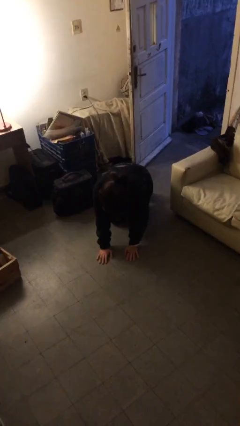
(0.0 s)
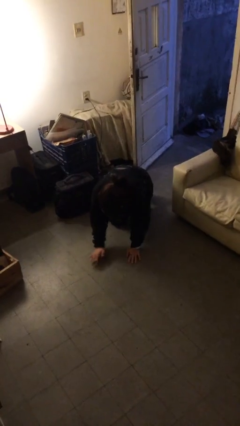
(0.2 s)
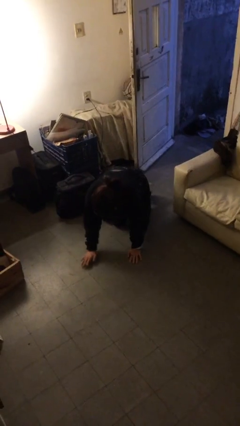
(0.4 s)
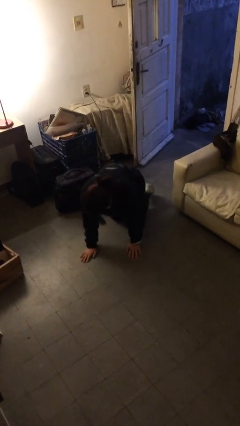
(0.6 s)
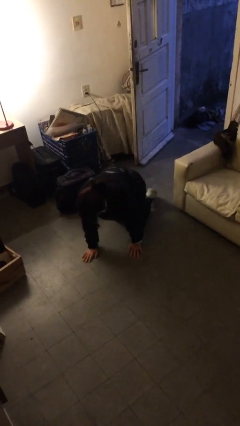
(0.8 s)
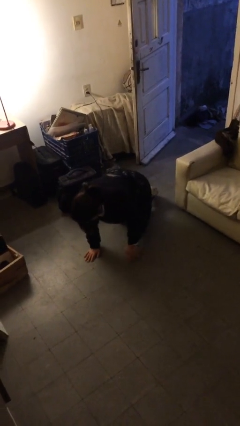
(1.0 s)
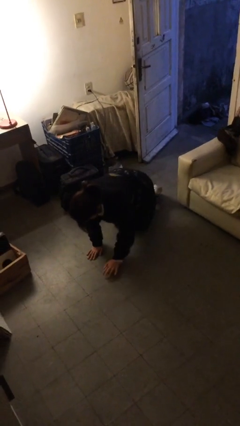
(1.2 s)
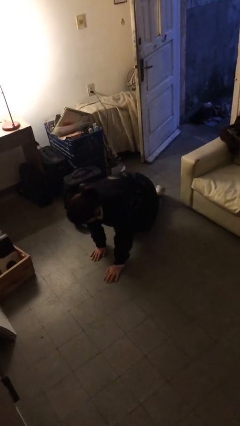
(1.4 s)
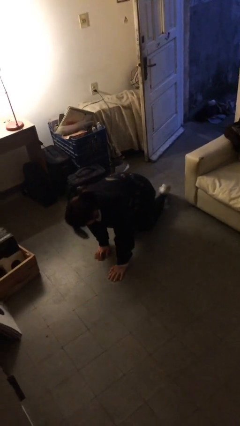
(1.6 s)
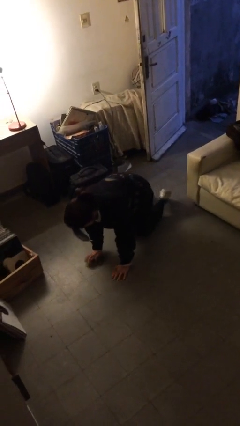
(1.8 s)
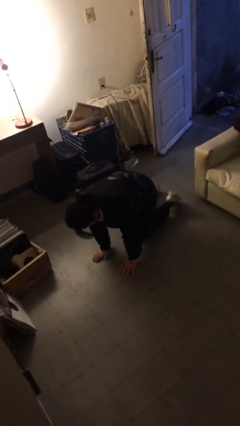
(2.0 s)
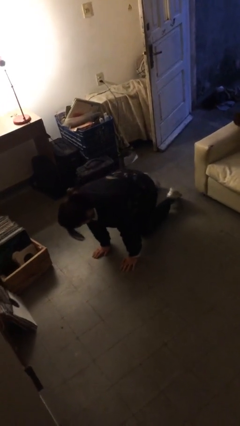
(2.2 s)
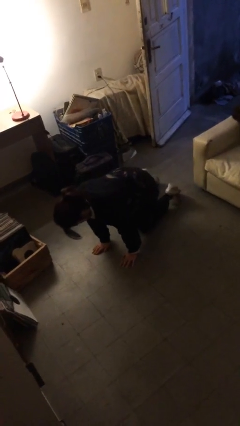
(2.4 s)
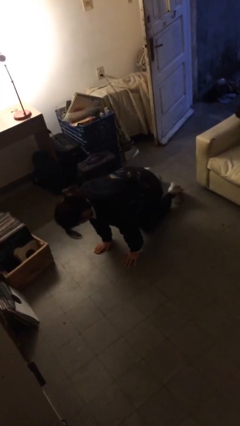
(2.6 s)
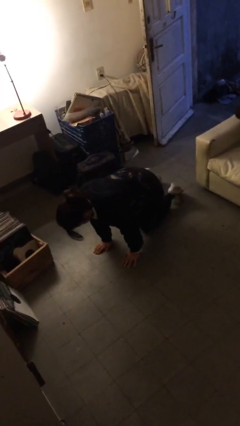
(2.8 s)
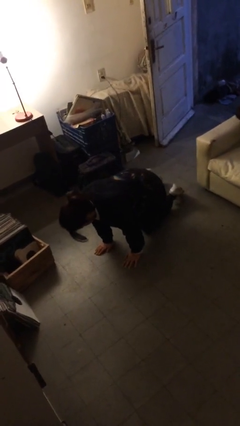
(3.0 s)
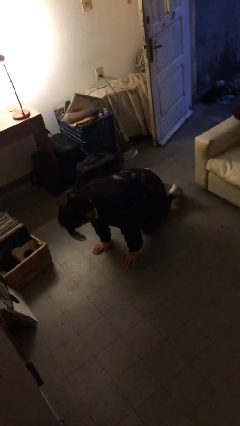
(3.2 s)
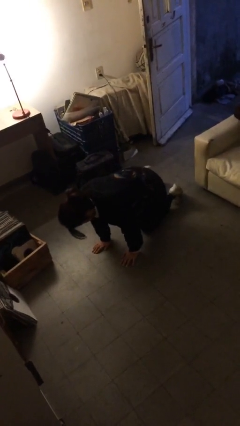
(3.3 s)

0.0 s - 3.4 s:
person crawls

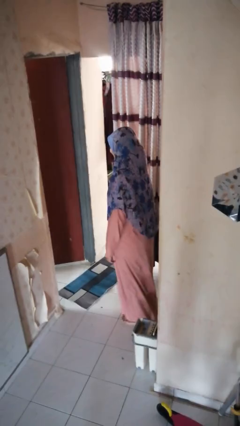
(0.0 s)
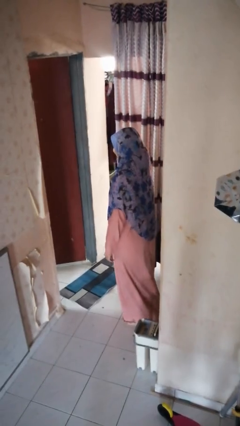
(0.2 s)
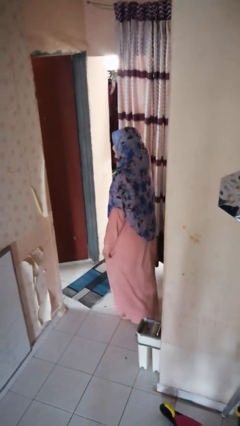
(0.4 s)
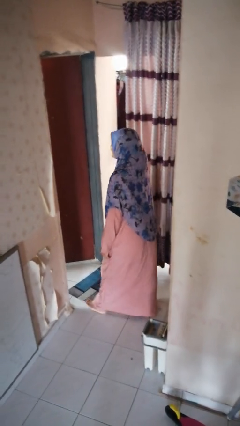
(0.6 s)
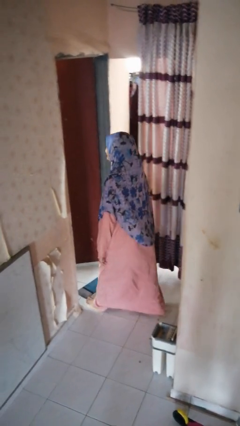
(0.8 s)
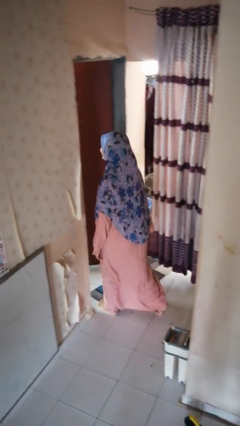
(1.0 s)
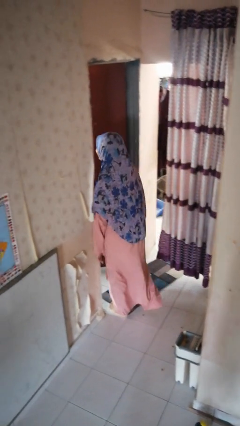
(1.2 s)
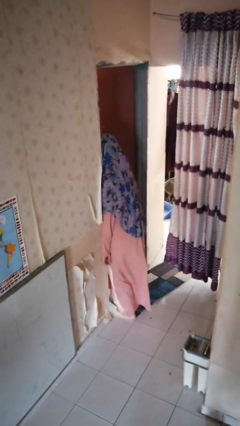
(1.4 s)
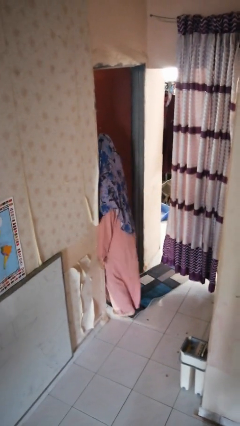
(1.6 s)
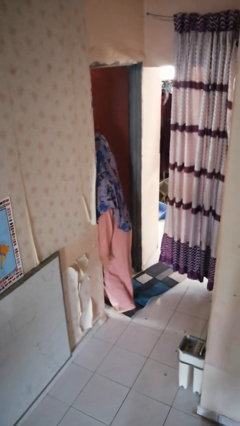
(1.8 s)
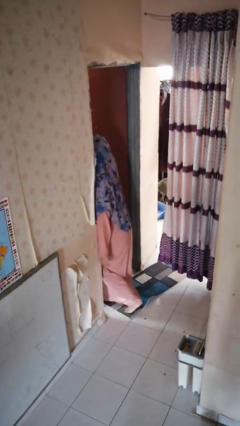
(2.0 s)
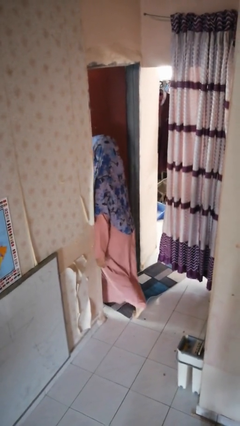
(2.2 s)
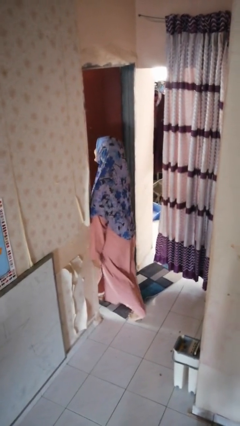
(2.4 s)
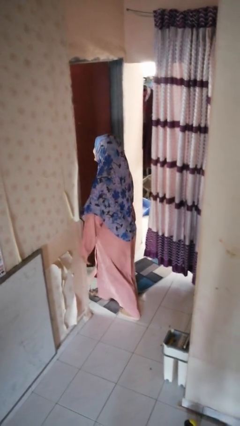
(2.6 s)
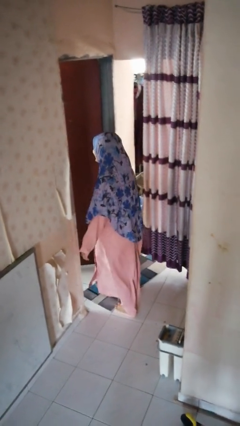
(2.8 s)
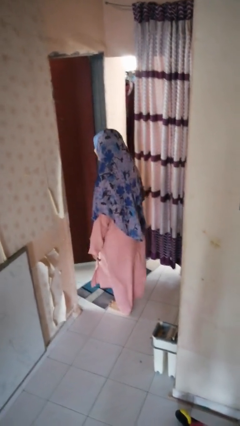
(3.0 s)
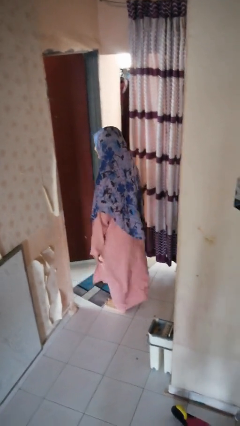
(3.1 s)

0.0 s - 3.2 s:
person bumps into wall

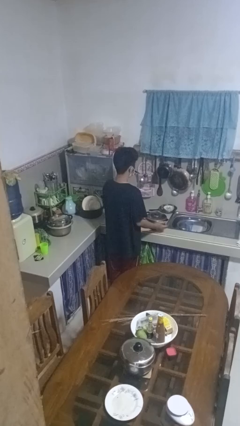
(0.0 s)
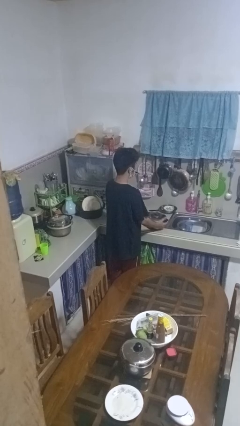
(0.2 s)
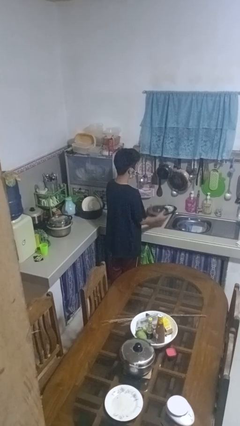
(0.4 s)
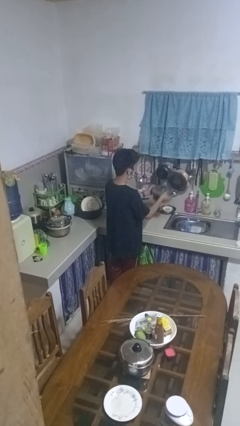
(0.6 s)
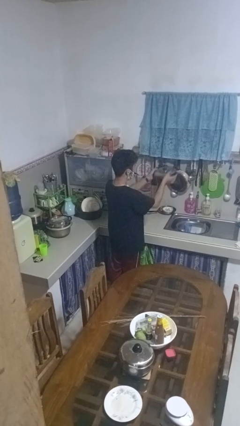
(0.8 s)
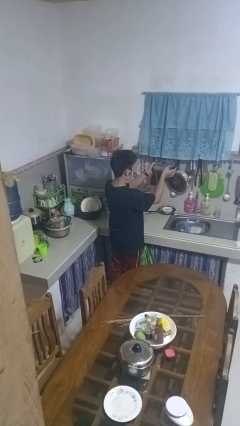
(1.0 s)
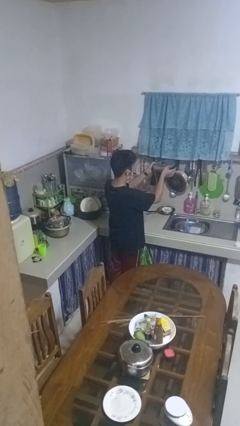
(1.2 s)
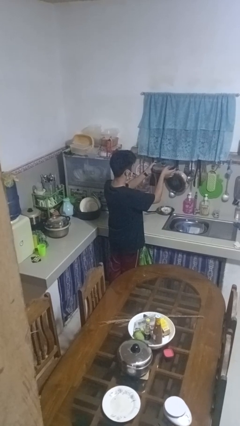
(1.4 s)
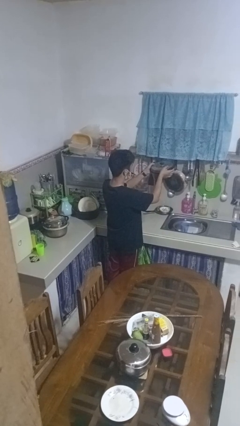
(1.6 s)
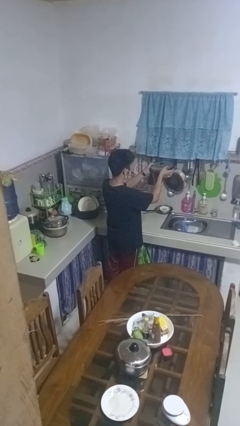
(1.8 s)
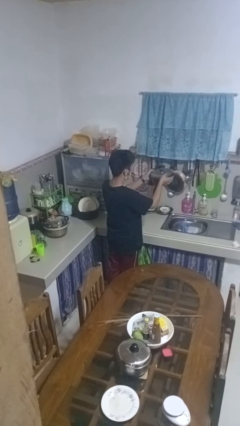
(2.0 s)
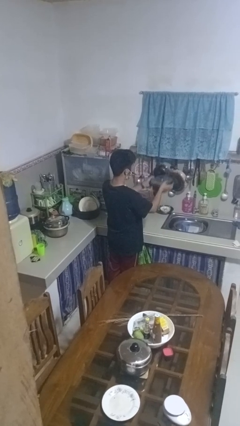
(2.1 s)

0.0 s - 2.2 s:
person picks up object from countertop

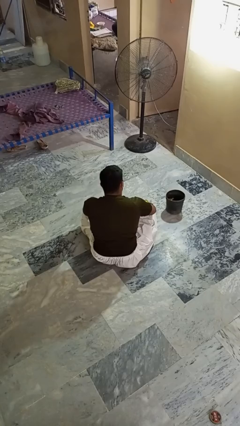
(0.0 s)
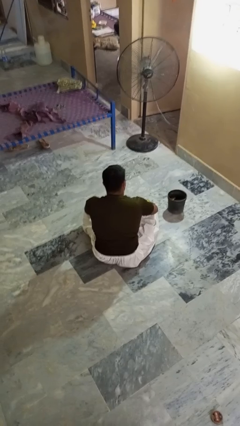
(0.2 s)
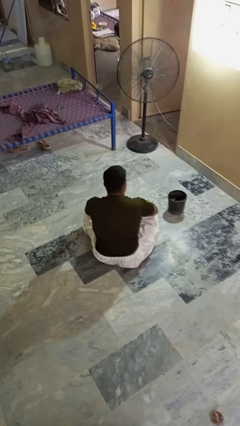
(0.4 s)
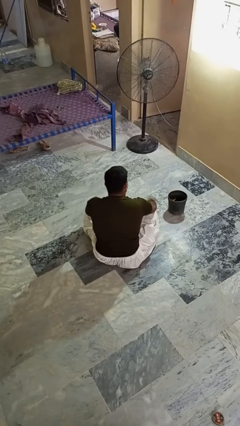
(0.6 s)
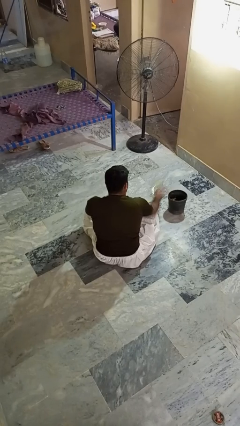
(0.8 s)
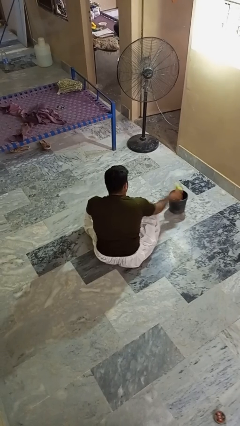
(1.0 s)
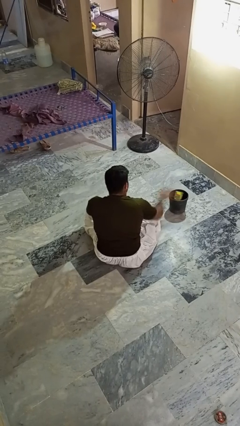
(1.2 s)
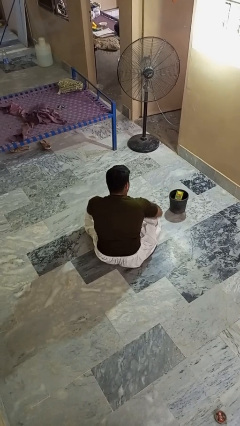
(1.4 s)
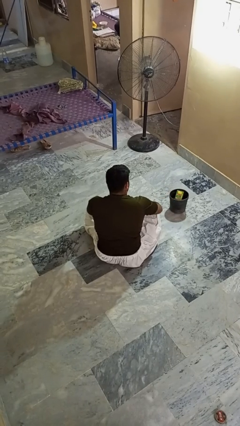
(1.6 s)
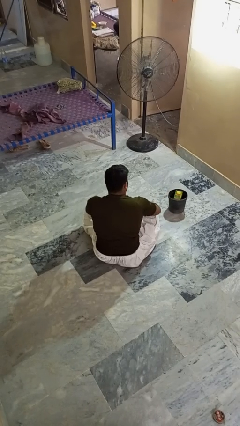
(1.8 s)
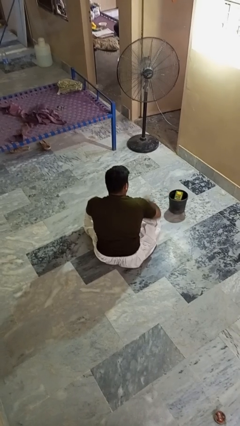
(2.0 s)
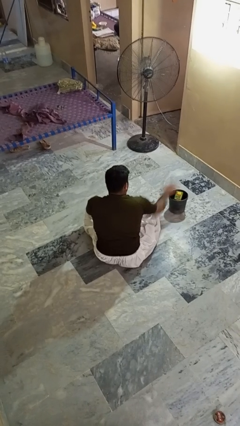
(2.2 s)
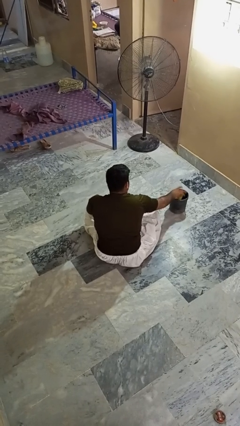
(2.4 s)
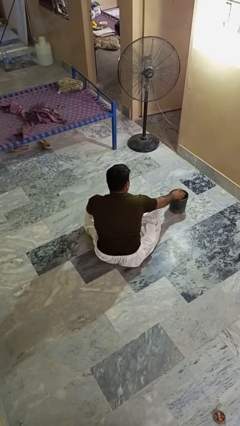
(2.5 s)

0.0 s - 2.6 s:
person puts object into basket

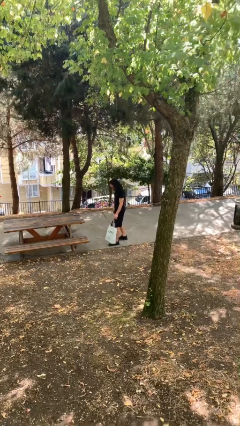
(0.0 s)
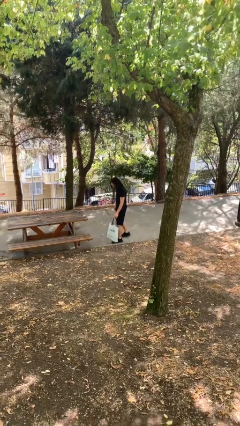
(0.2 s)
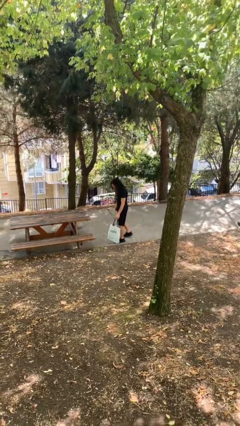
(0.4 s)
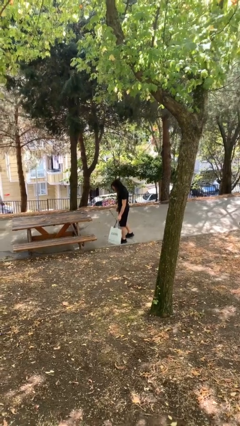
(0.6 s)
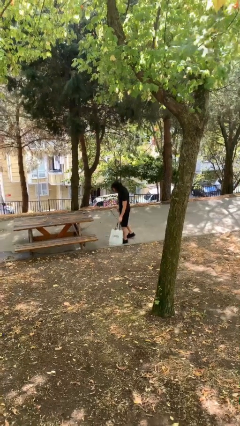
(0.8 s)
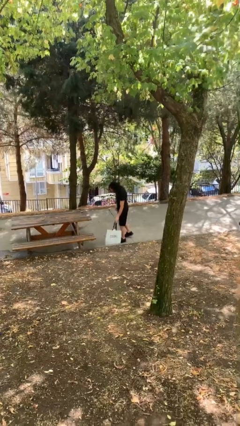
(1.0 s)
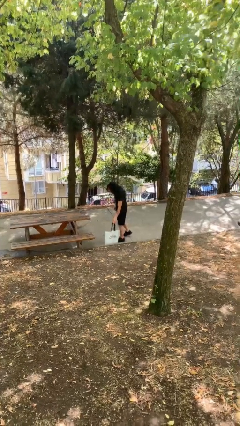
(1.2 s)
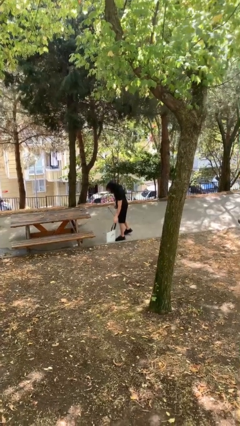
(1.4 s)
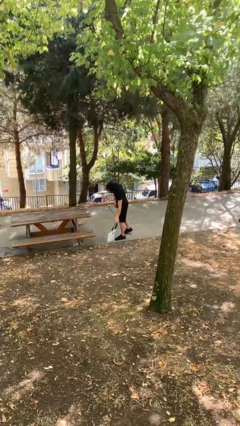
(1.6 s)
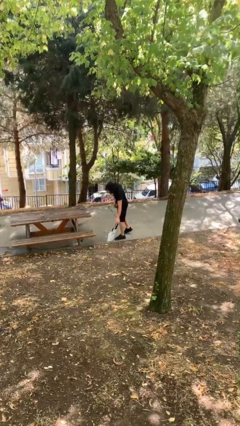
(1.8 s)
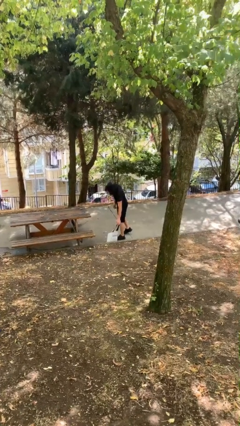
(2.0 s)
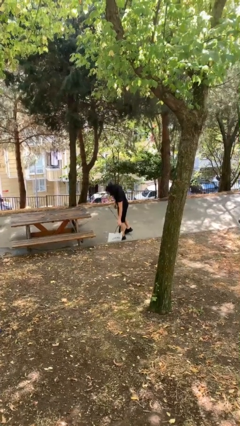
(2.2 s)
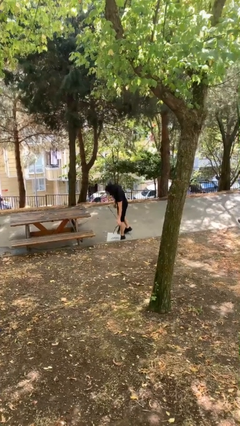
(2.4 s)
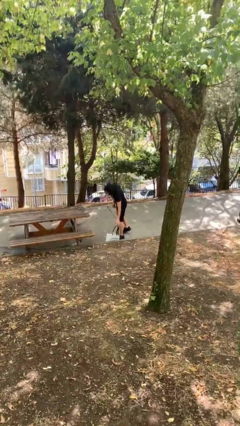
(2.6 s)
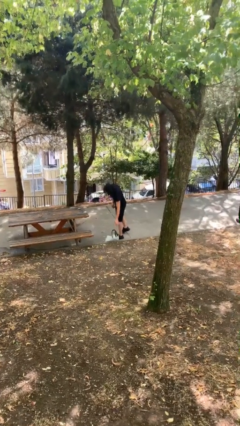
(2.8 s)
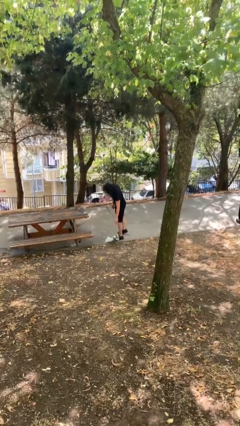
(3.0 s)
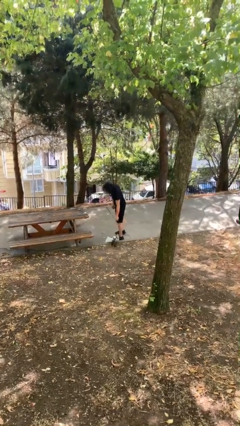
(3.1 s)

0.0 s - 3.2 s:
person puts down object on floor

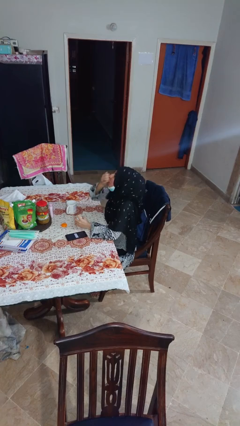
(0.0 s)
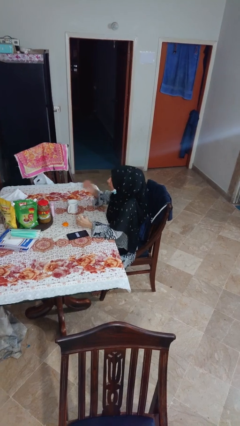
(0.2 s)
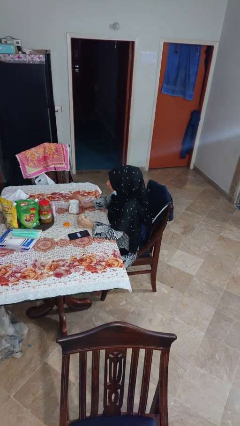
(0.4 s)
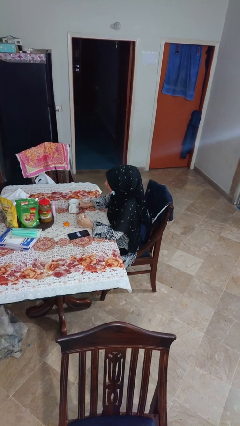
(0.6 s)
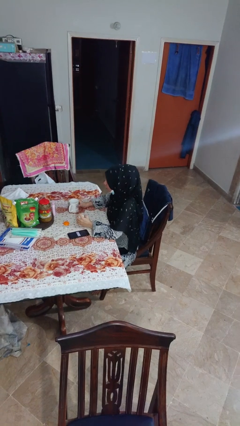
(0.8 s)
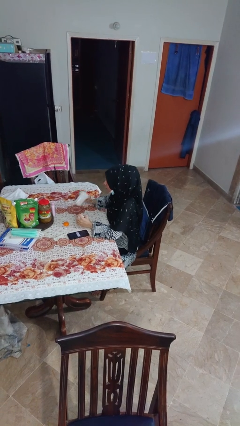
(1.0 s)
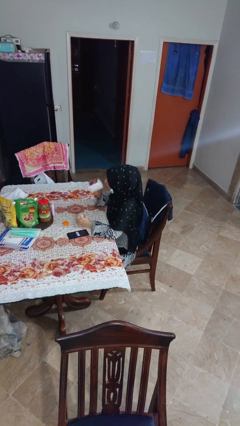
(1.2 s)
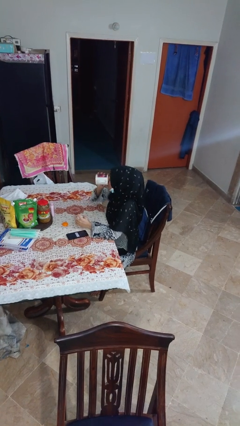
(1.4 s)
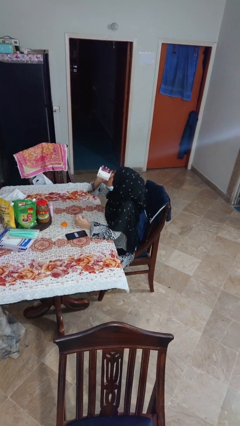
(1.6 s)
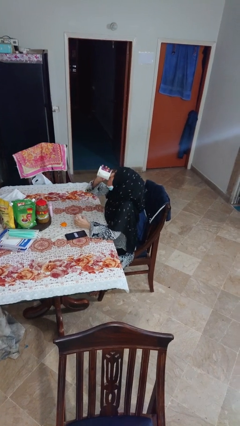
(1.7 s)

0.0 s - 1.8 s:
person drinks from cup

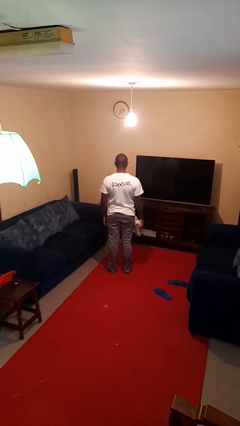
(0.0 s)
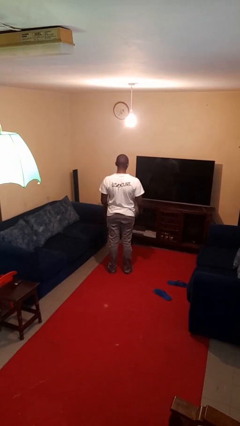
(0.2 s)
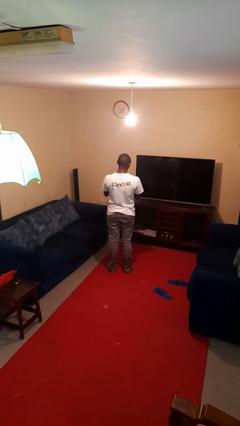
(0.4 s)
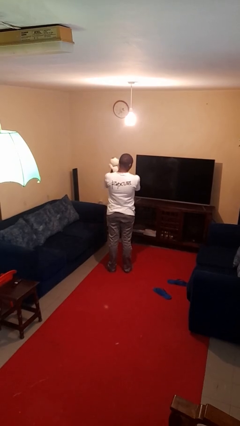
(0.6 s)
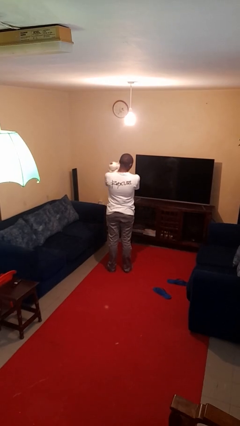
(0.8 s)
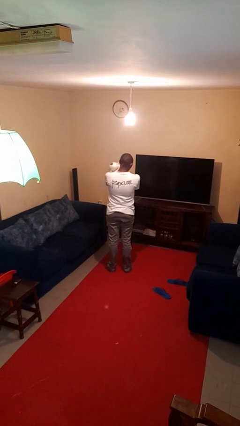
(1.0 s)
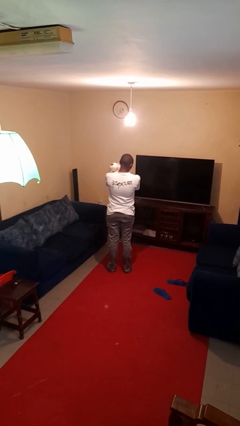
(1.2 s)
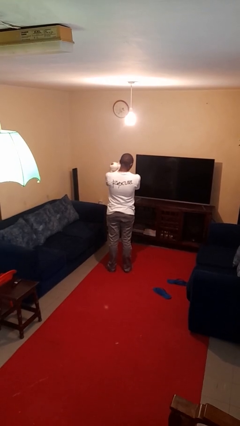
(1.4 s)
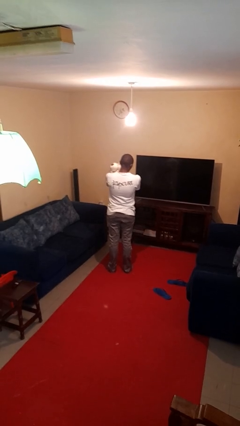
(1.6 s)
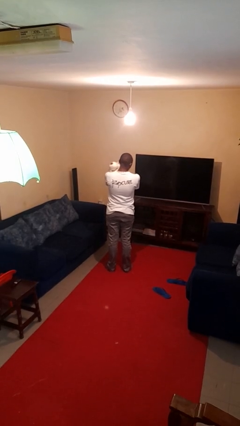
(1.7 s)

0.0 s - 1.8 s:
person hugs stuffed animal
